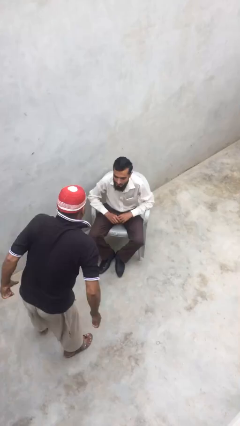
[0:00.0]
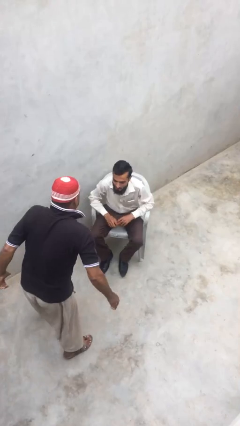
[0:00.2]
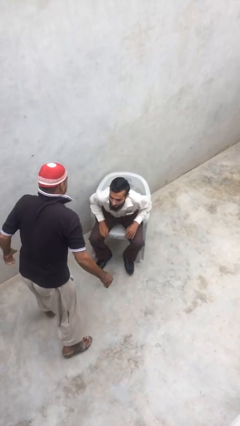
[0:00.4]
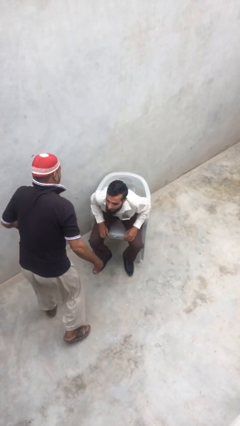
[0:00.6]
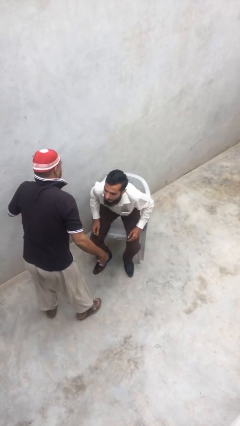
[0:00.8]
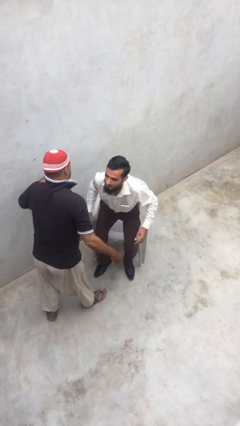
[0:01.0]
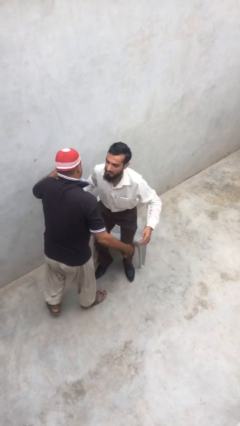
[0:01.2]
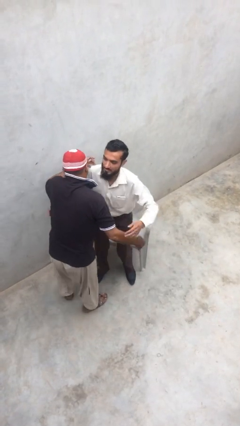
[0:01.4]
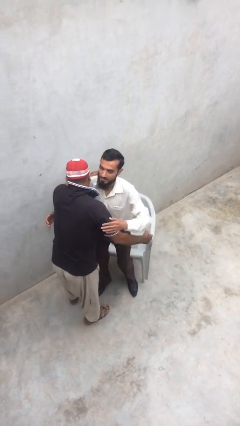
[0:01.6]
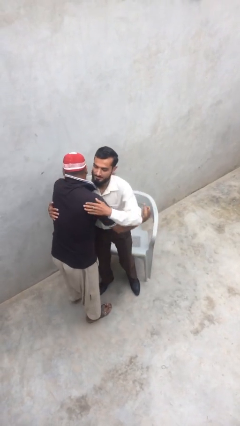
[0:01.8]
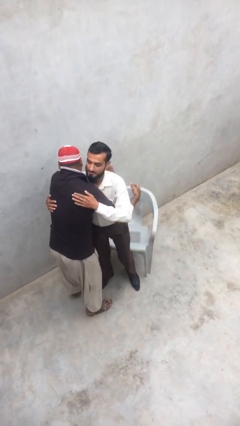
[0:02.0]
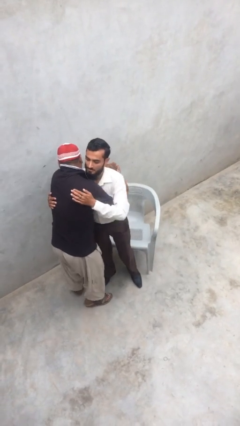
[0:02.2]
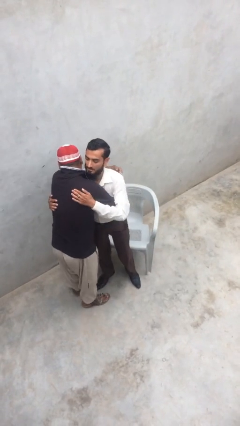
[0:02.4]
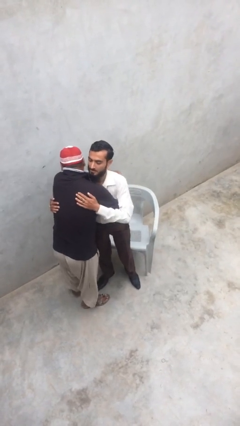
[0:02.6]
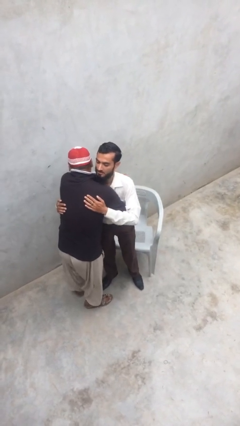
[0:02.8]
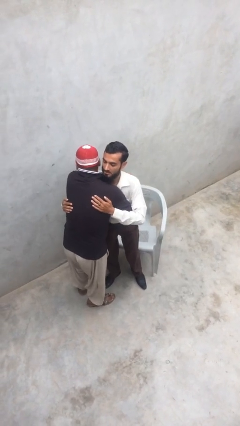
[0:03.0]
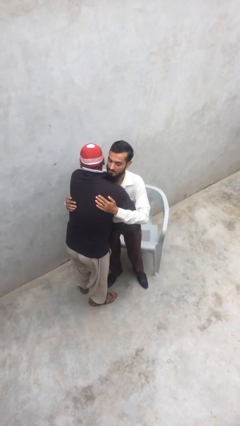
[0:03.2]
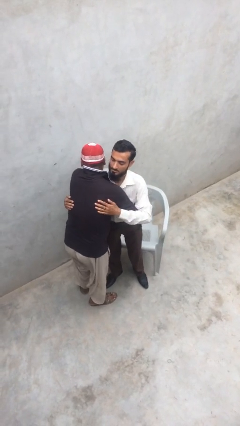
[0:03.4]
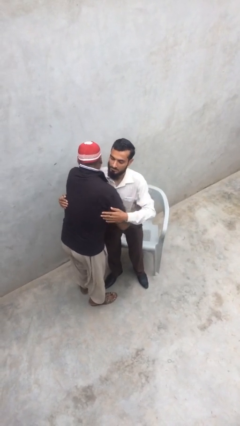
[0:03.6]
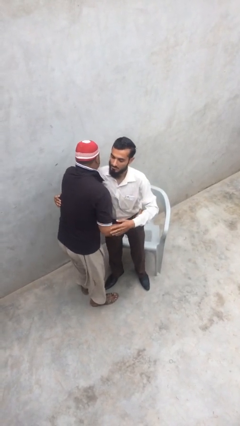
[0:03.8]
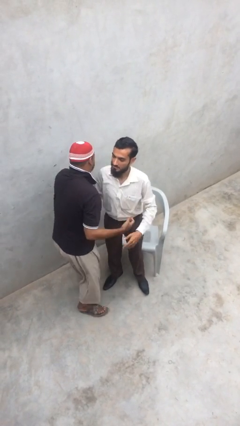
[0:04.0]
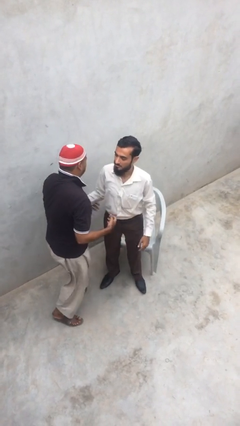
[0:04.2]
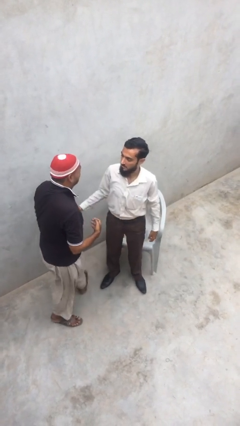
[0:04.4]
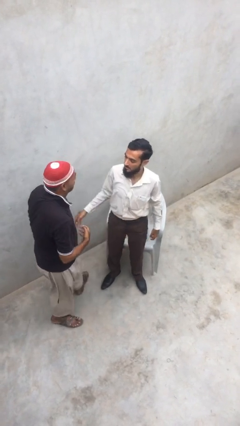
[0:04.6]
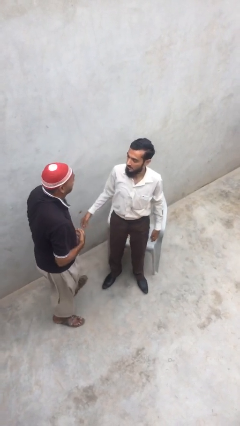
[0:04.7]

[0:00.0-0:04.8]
person embraces person

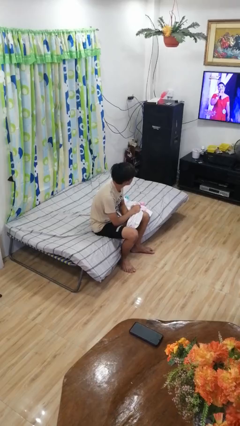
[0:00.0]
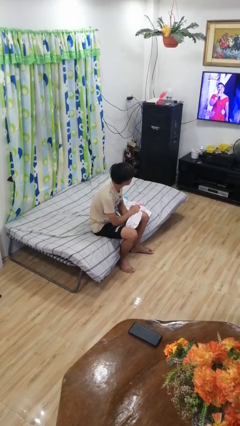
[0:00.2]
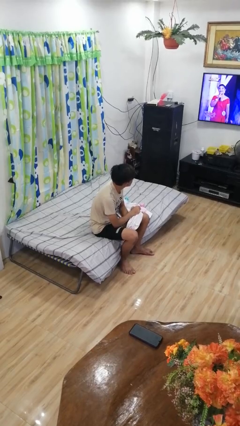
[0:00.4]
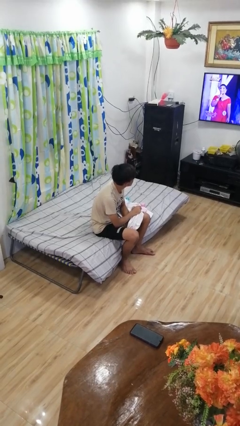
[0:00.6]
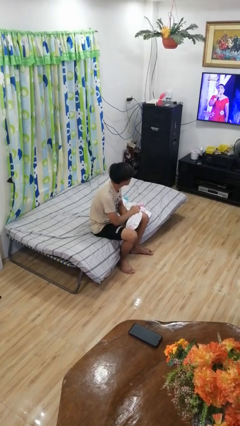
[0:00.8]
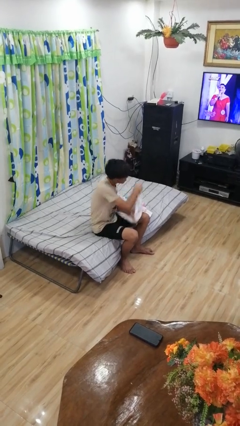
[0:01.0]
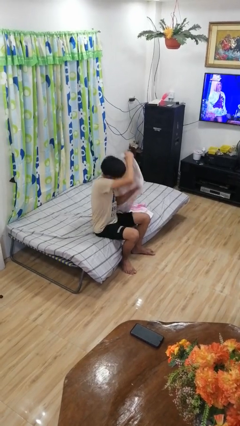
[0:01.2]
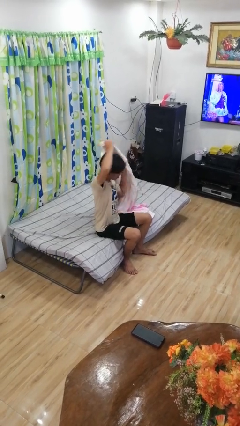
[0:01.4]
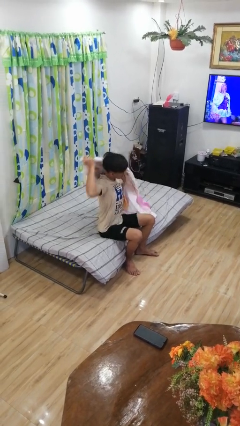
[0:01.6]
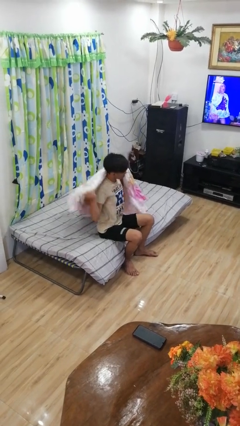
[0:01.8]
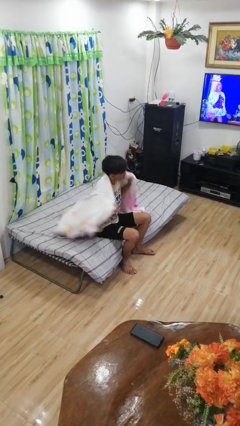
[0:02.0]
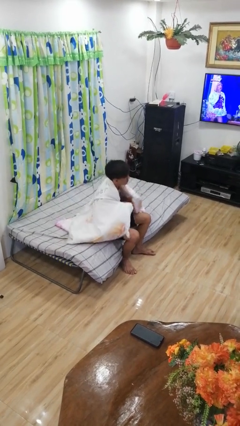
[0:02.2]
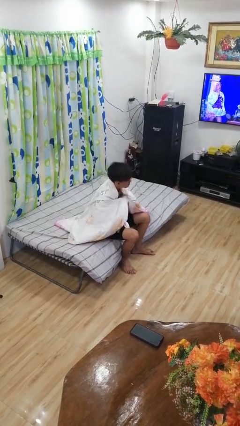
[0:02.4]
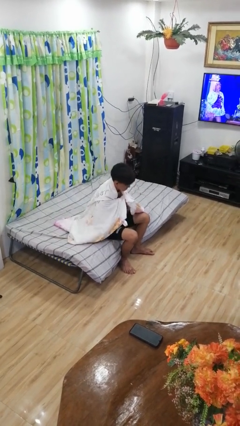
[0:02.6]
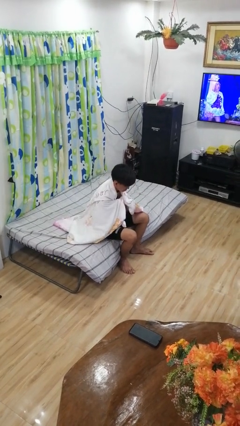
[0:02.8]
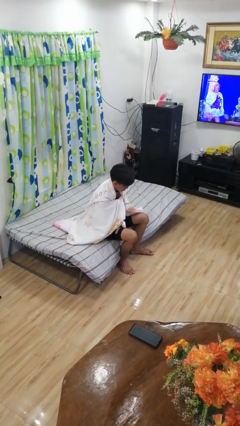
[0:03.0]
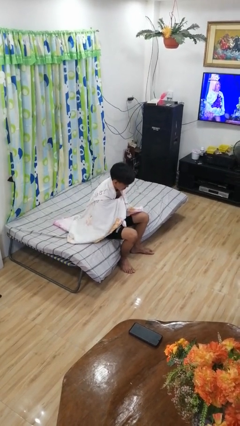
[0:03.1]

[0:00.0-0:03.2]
person covers with blanket

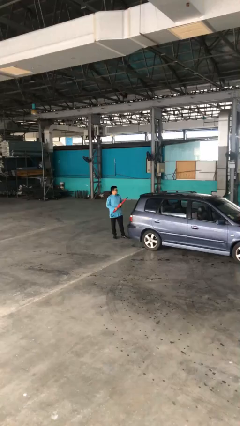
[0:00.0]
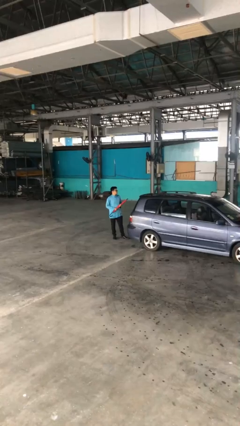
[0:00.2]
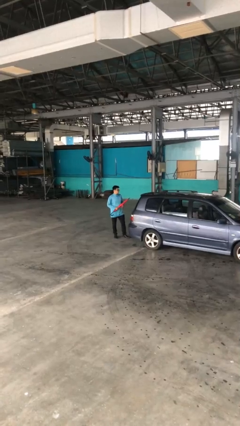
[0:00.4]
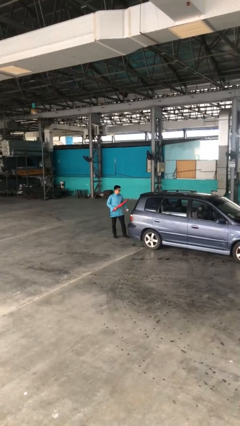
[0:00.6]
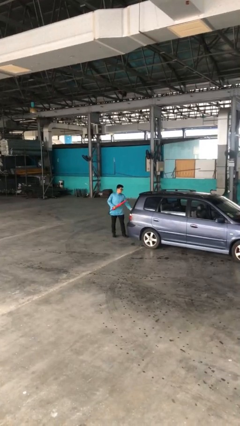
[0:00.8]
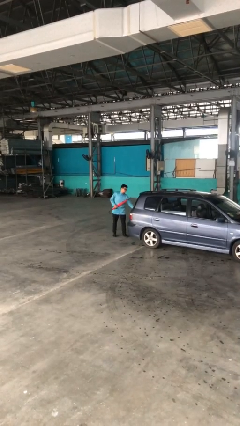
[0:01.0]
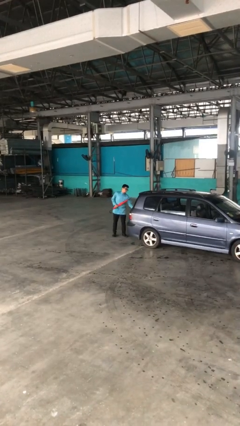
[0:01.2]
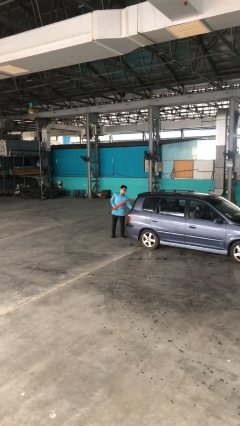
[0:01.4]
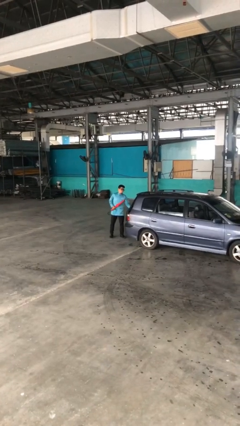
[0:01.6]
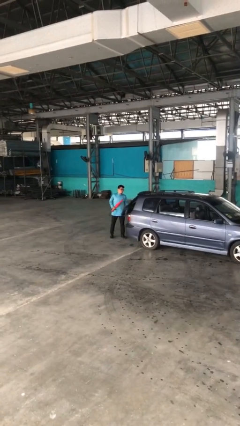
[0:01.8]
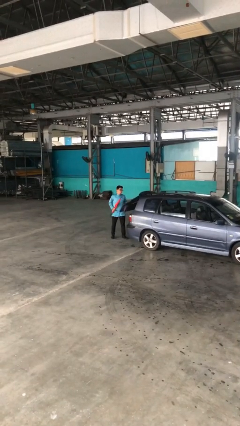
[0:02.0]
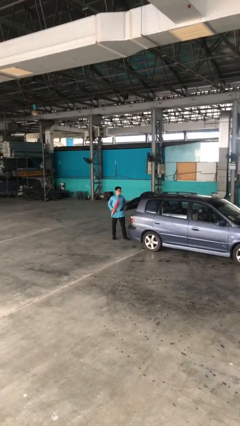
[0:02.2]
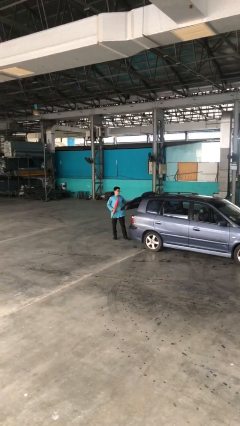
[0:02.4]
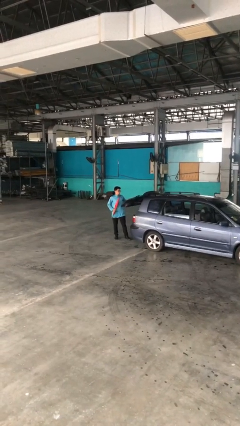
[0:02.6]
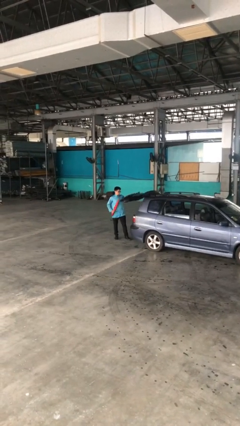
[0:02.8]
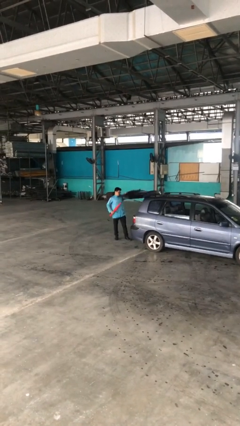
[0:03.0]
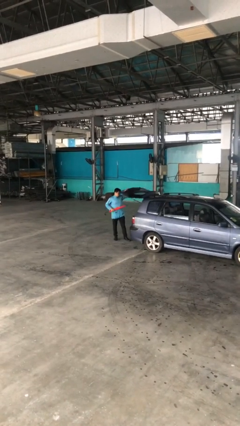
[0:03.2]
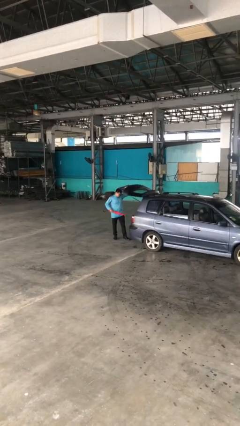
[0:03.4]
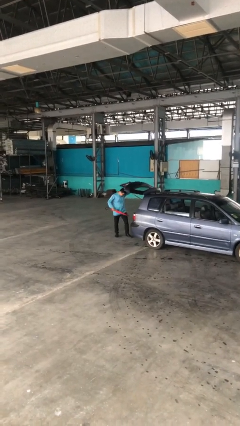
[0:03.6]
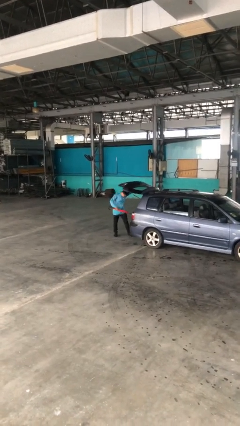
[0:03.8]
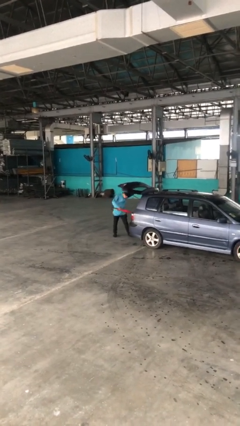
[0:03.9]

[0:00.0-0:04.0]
person opens car trunk

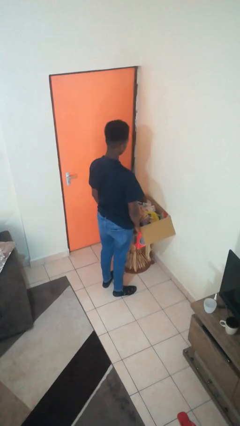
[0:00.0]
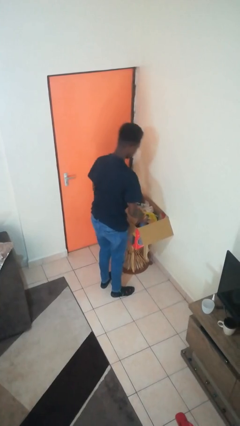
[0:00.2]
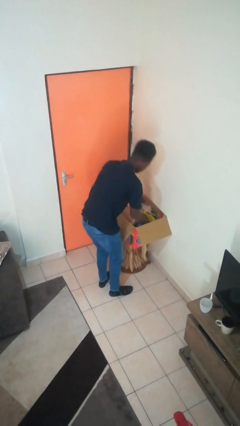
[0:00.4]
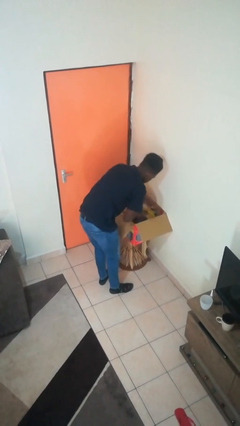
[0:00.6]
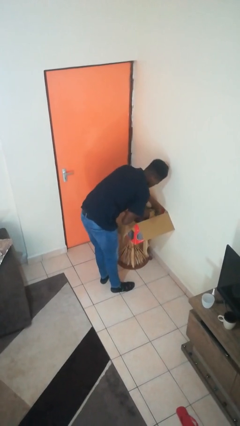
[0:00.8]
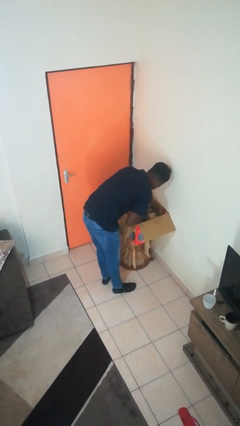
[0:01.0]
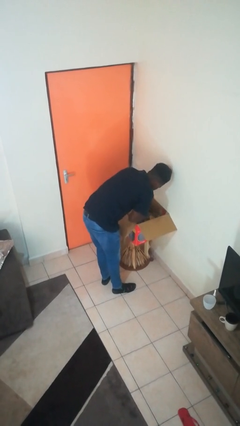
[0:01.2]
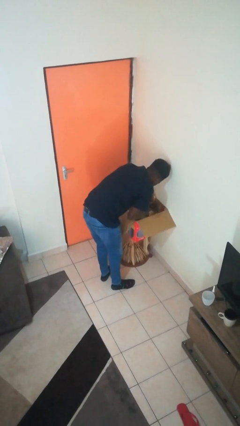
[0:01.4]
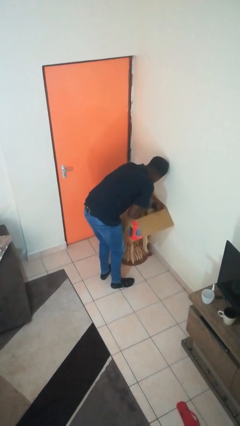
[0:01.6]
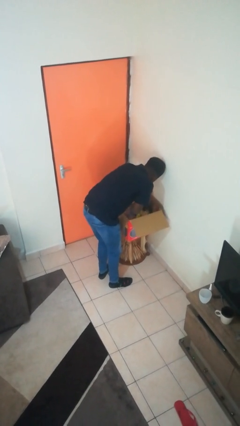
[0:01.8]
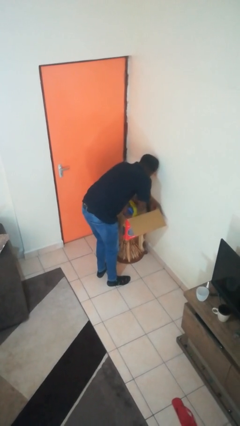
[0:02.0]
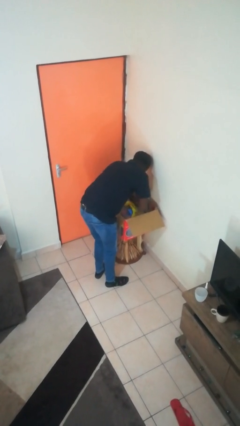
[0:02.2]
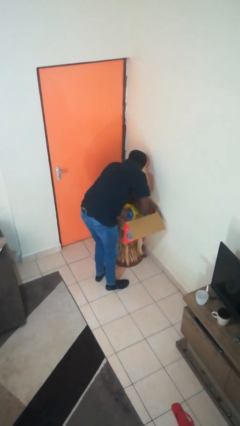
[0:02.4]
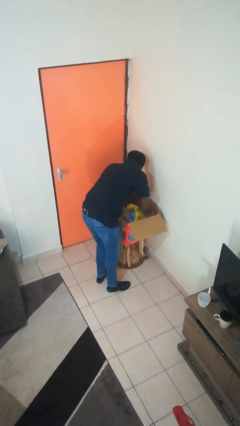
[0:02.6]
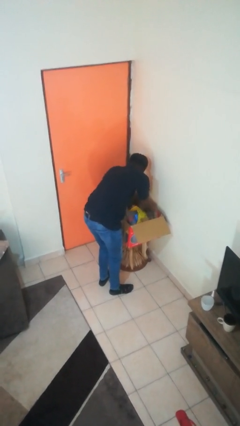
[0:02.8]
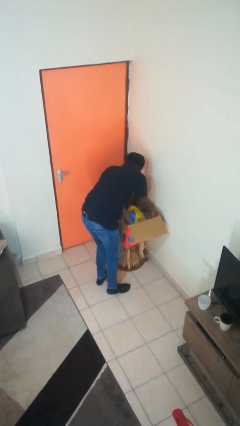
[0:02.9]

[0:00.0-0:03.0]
person searches in box

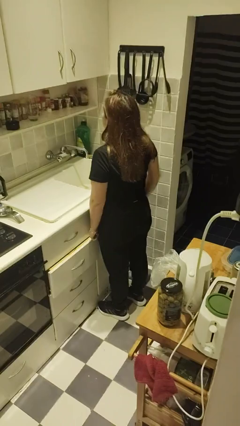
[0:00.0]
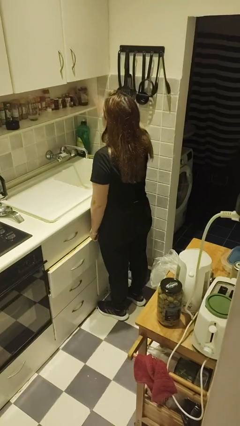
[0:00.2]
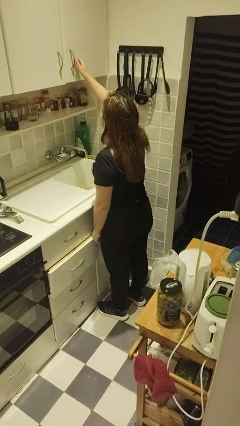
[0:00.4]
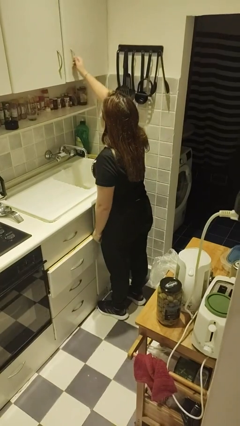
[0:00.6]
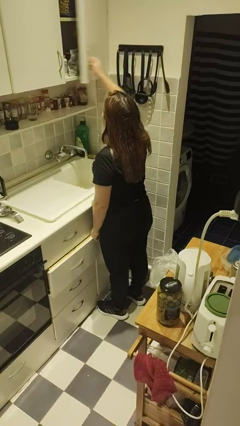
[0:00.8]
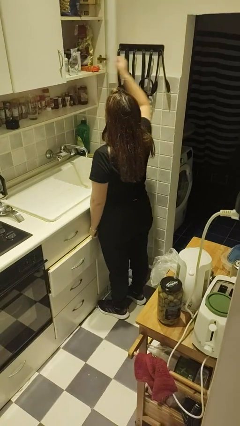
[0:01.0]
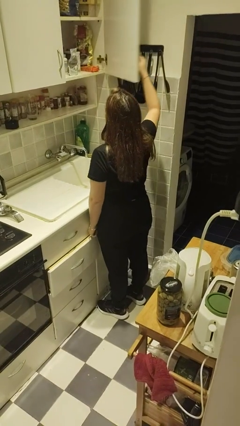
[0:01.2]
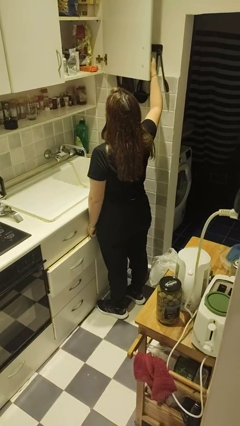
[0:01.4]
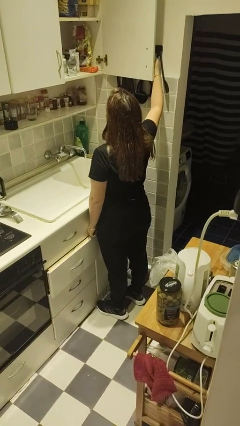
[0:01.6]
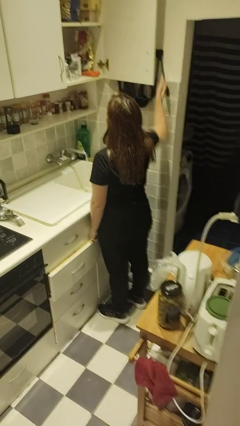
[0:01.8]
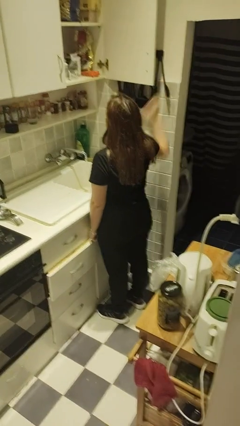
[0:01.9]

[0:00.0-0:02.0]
person opens cabinet

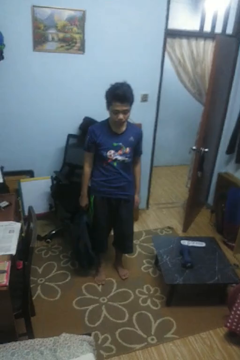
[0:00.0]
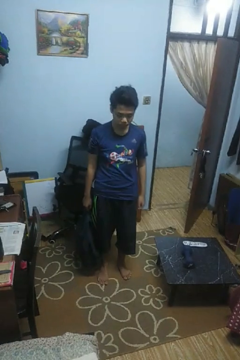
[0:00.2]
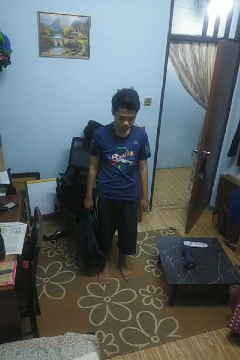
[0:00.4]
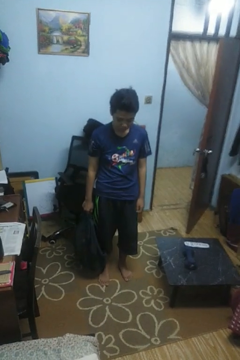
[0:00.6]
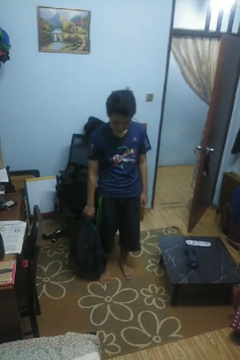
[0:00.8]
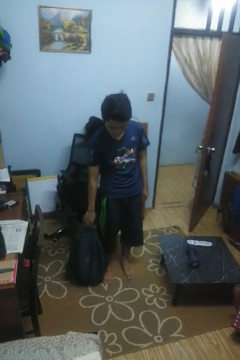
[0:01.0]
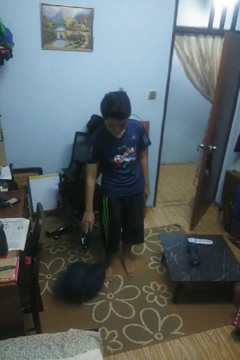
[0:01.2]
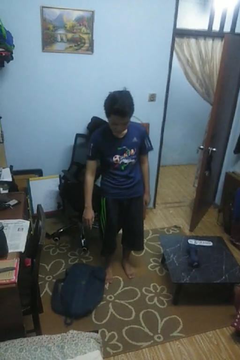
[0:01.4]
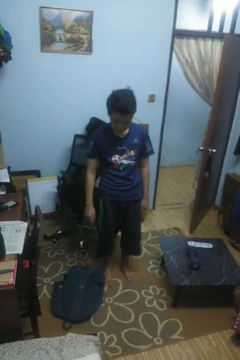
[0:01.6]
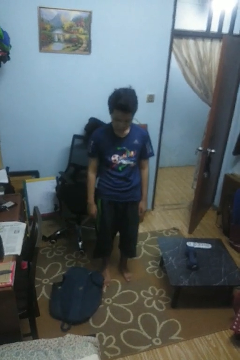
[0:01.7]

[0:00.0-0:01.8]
person drops object
